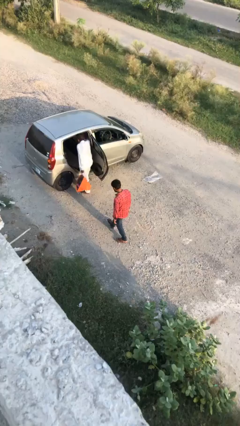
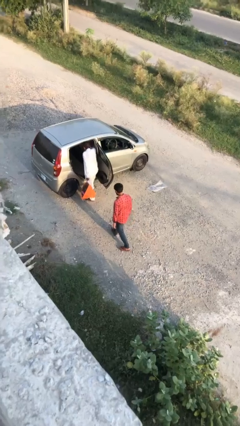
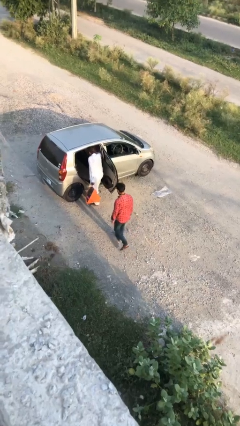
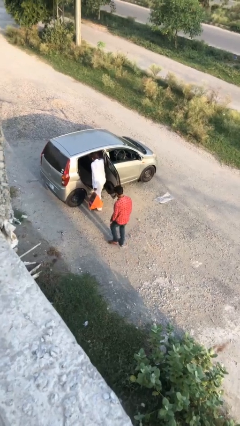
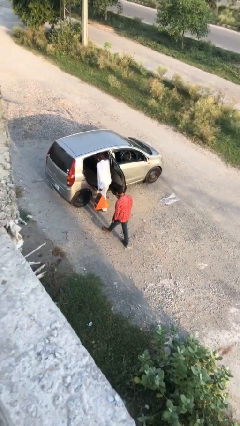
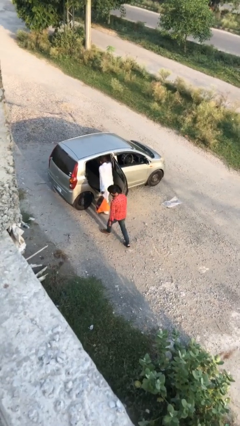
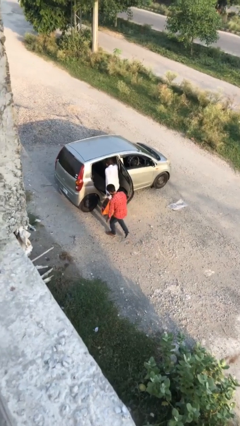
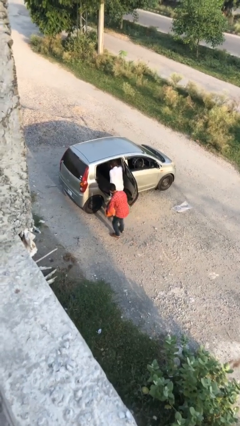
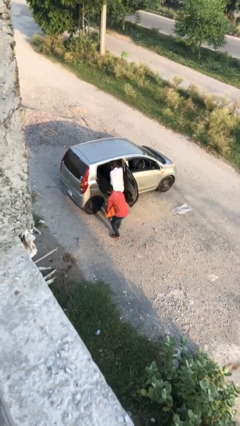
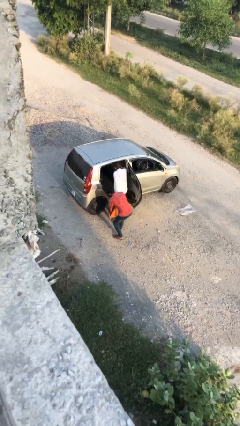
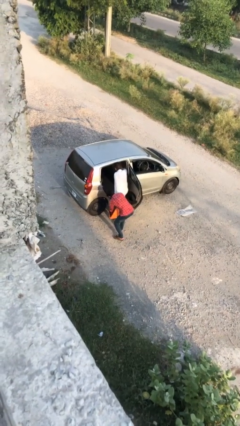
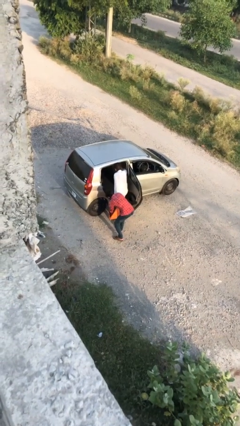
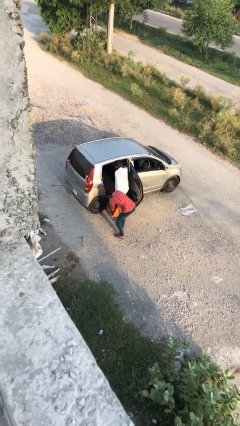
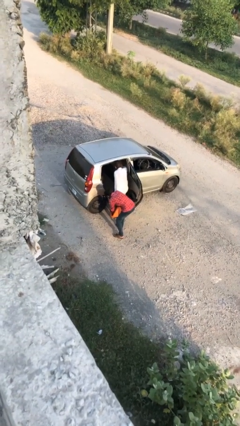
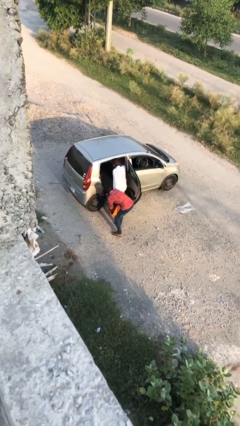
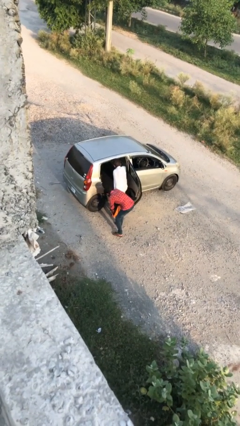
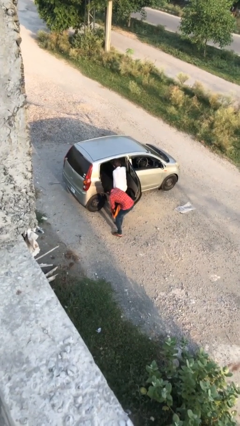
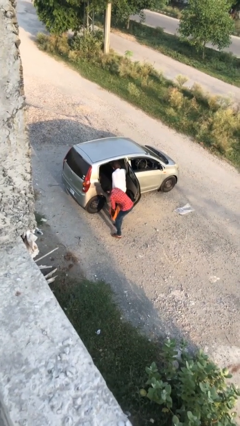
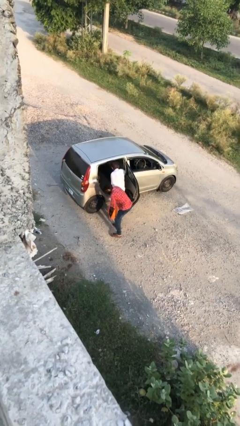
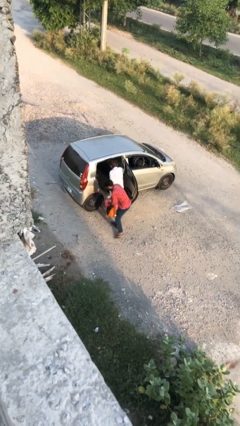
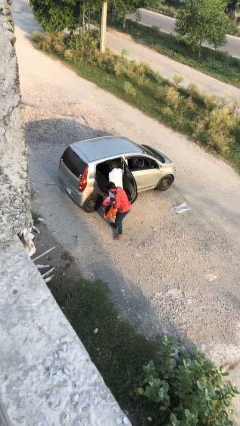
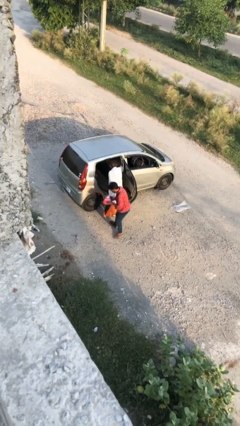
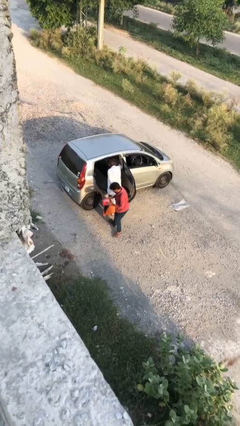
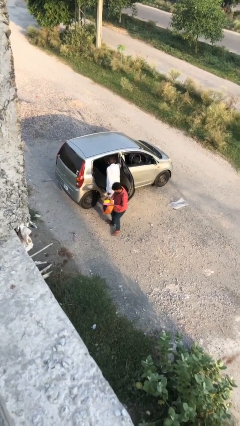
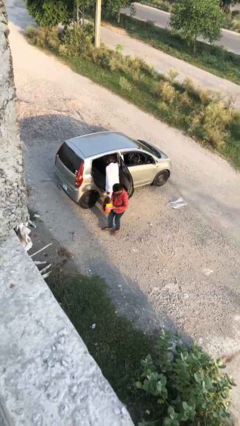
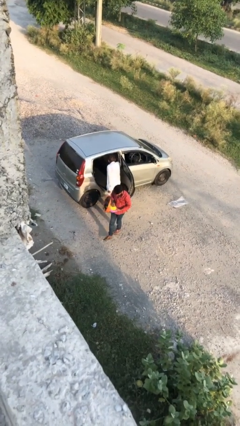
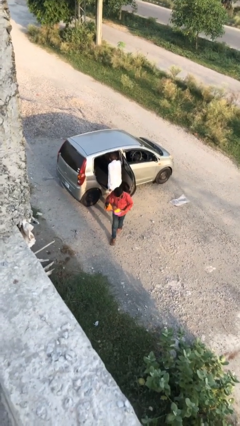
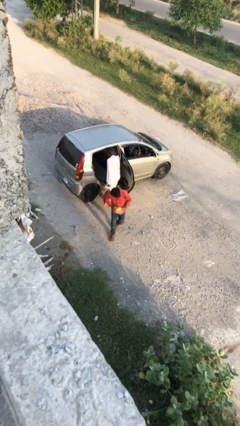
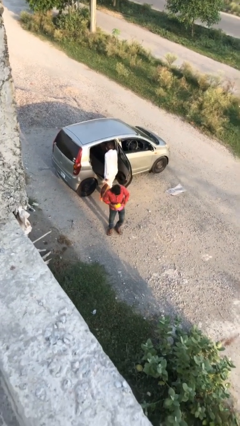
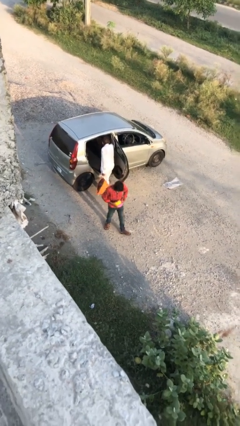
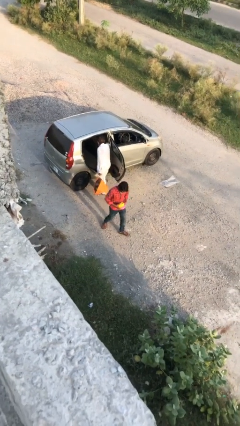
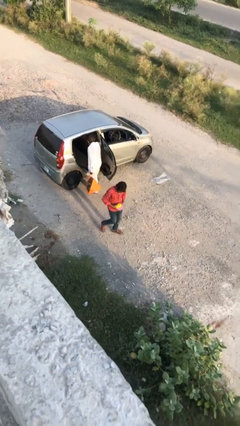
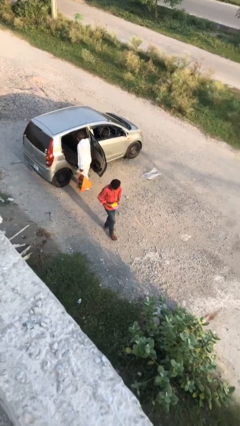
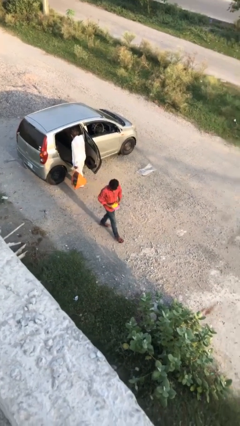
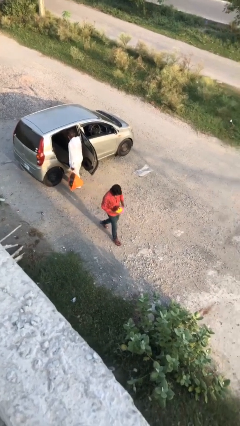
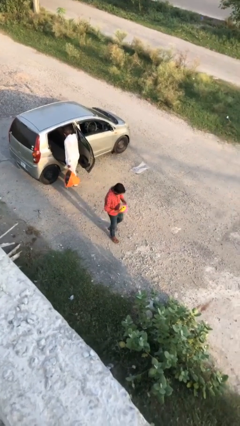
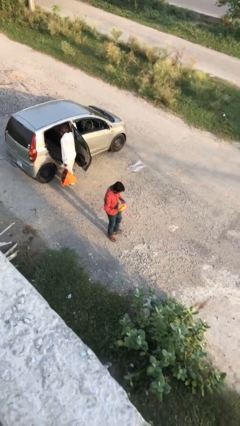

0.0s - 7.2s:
person steals object from person

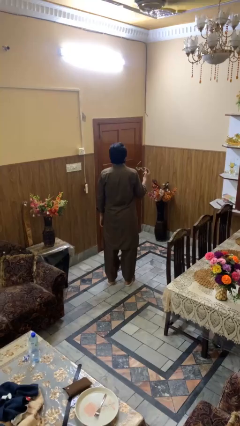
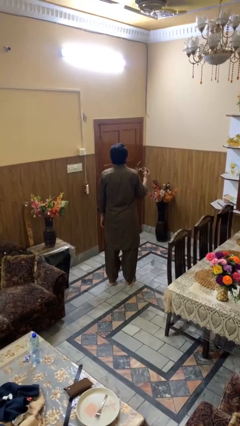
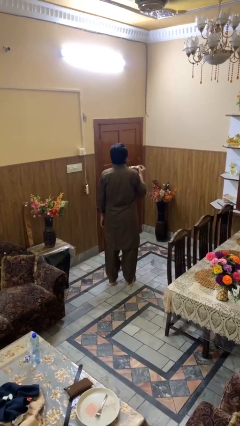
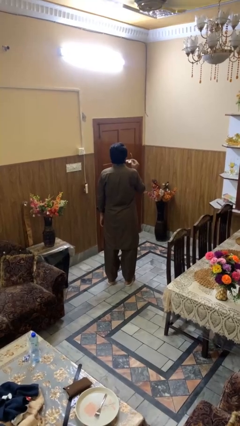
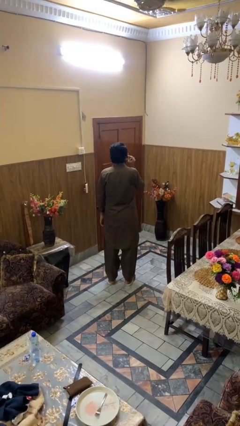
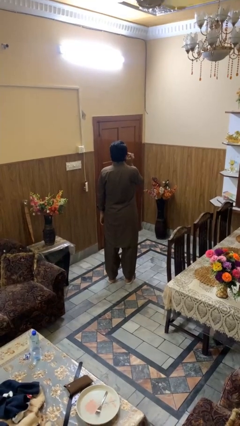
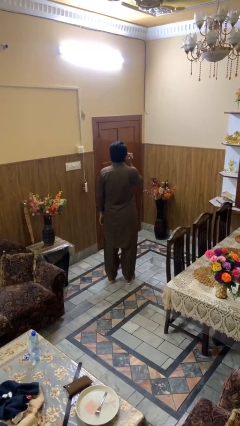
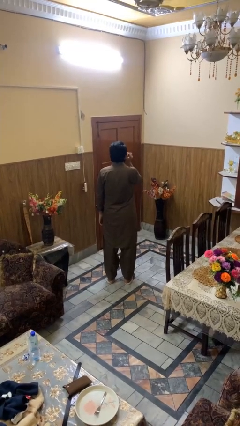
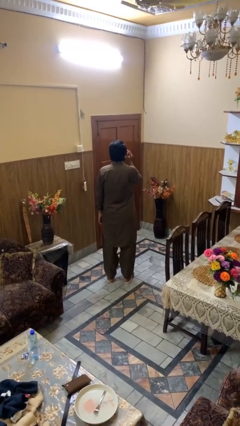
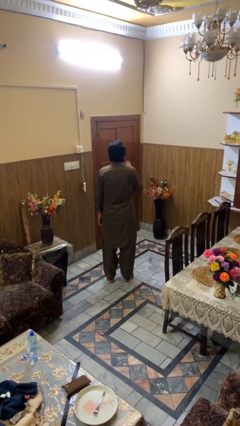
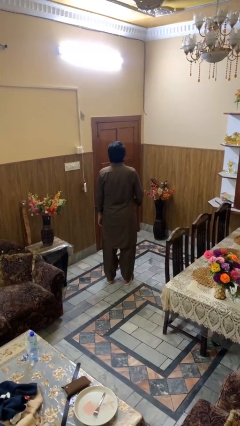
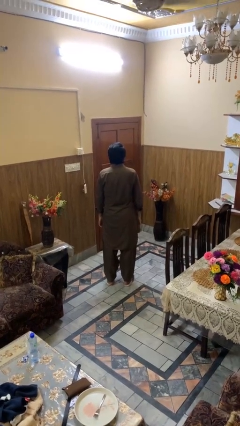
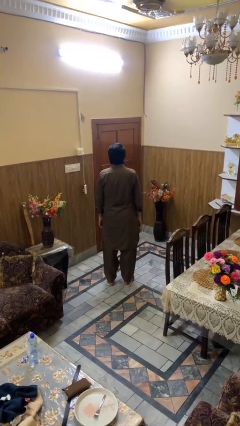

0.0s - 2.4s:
person puts on sunglasses

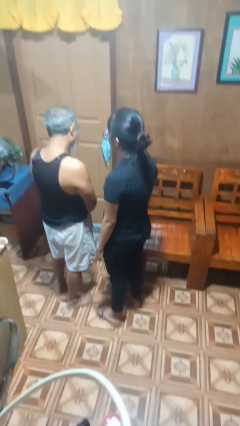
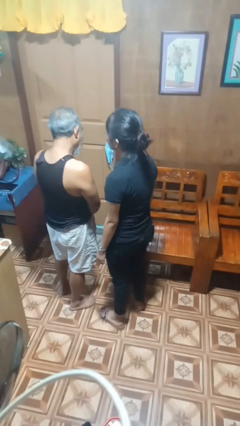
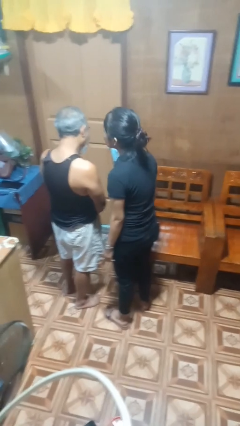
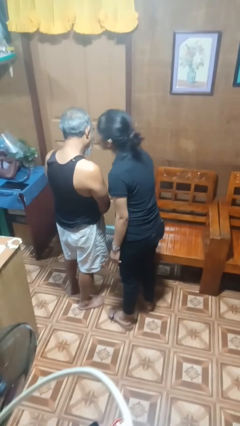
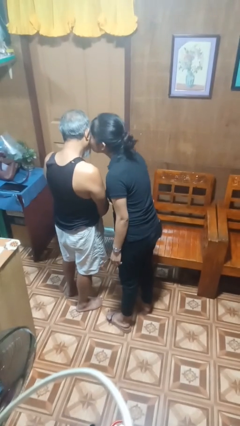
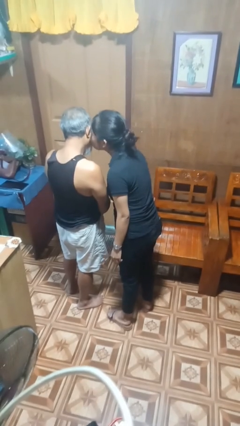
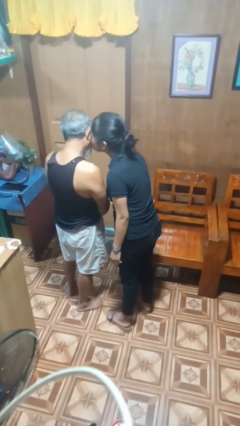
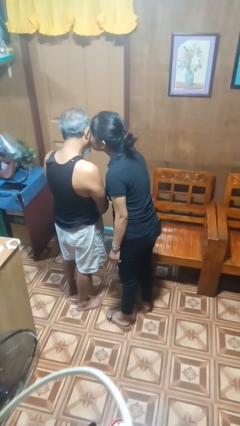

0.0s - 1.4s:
person kisses cheek of person

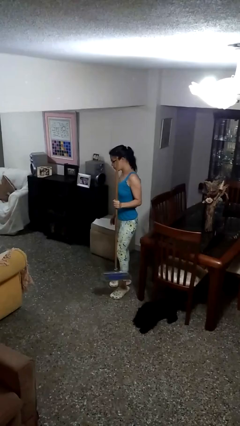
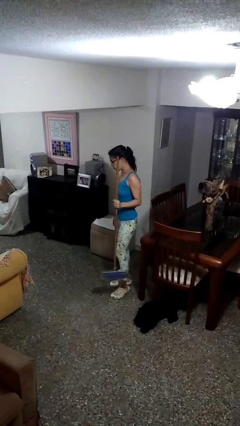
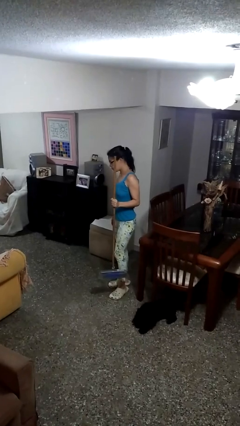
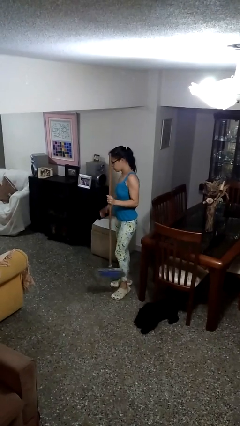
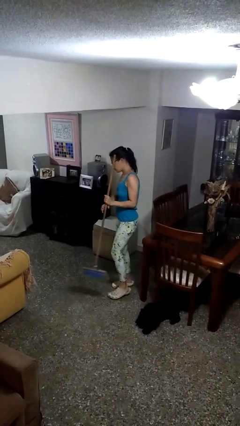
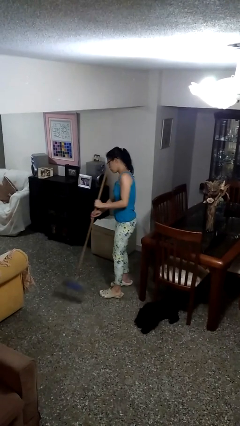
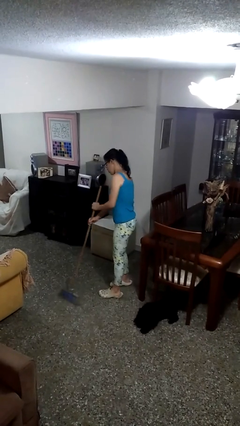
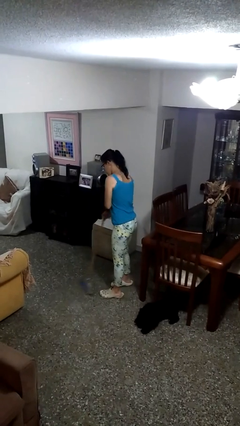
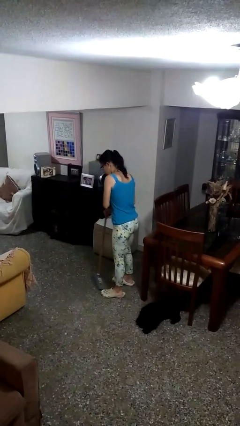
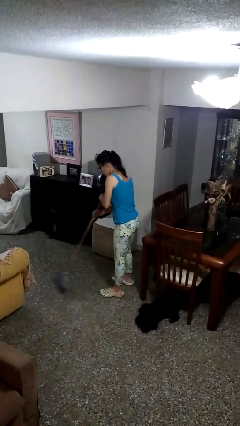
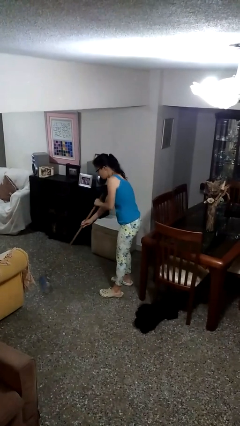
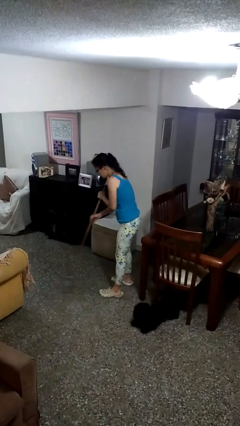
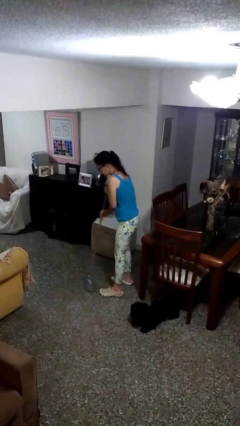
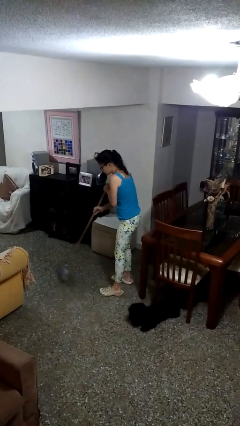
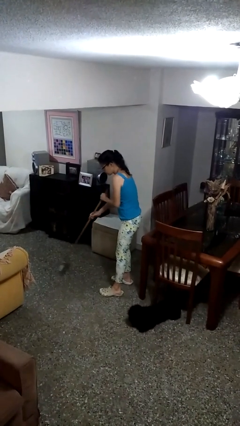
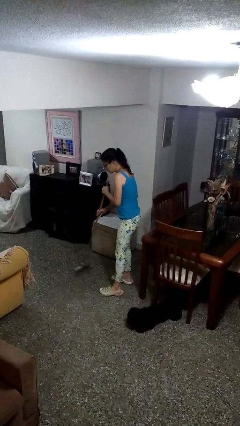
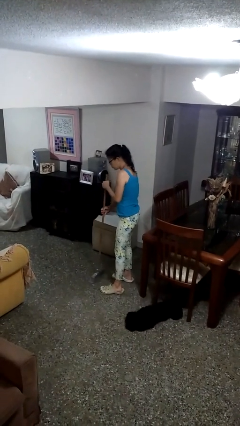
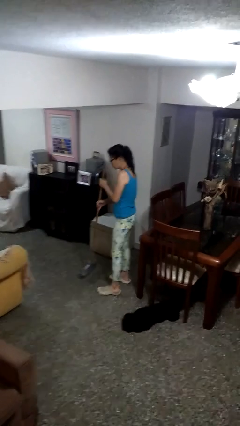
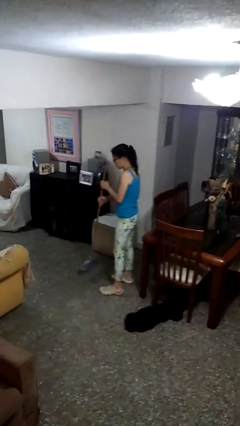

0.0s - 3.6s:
person sweeps floor

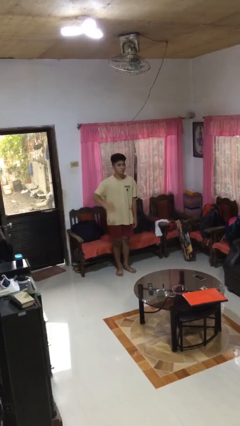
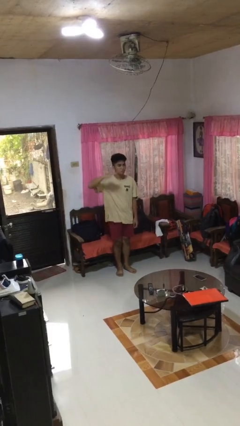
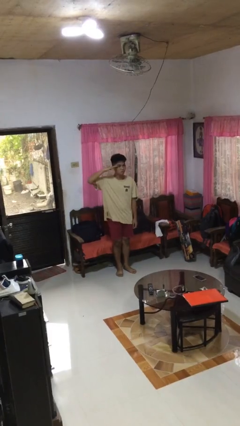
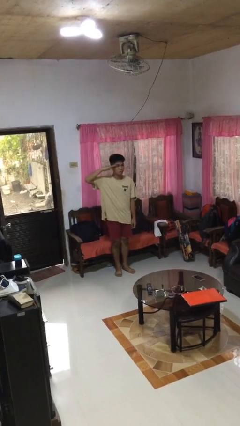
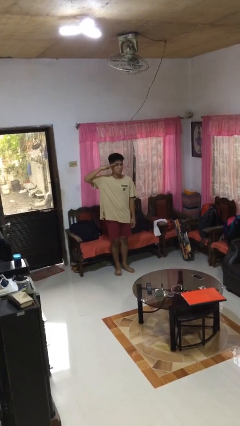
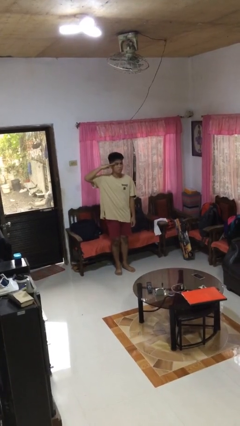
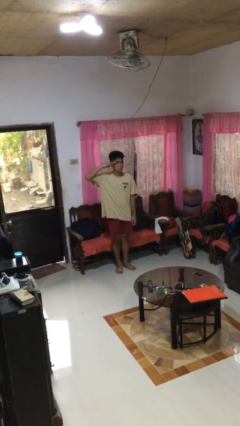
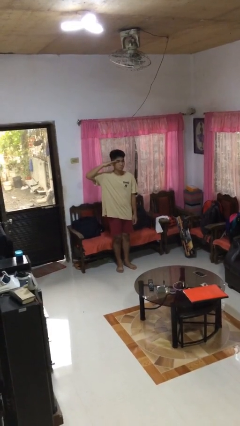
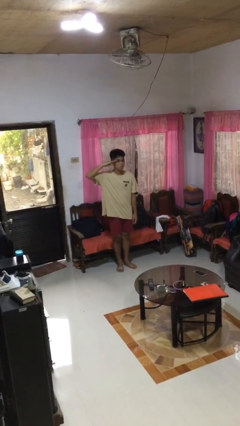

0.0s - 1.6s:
person salutes

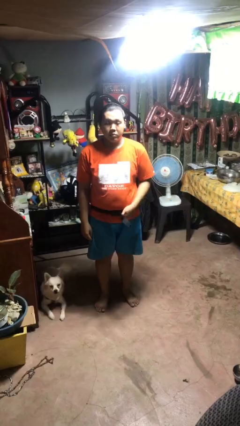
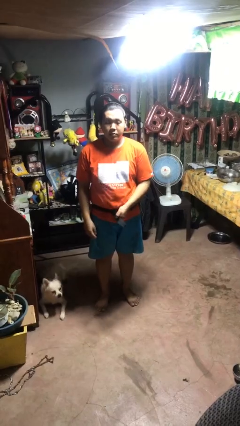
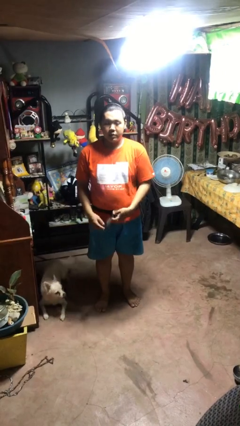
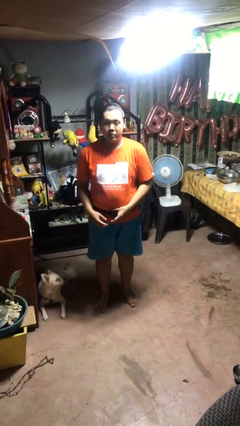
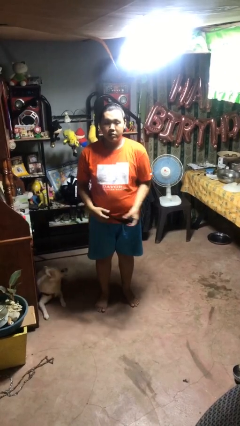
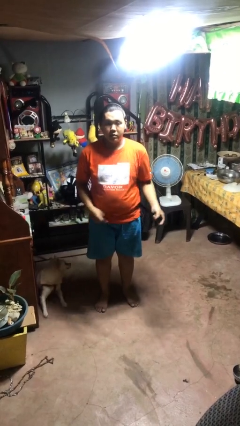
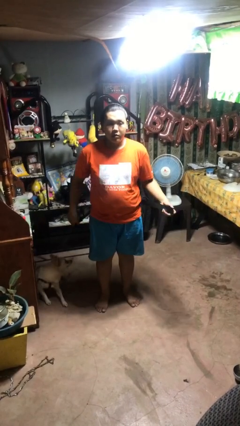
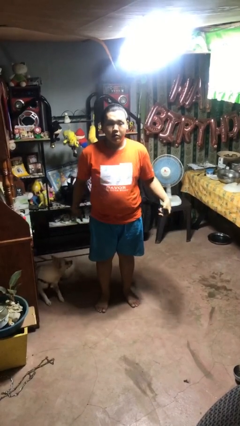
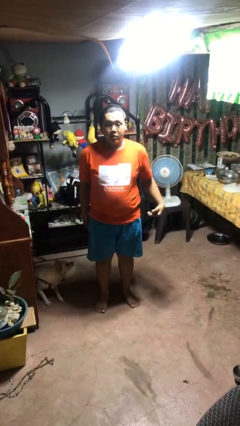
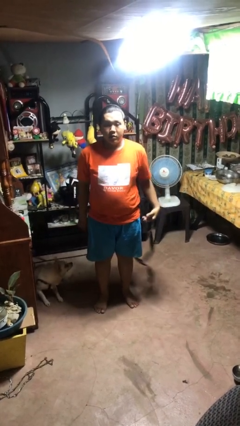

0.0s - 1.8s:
person takes off belt
